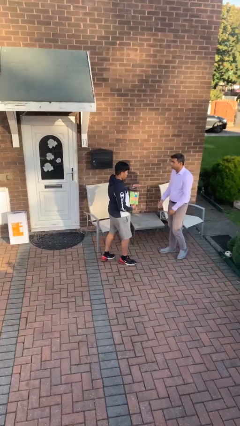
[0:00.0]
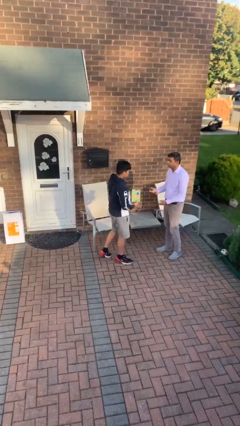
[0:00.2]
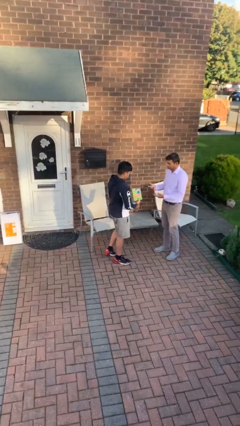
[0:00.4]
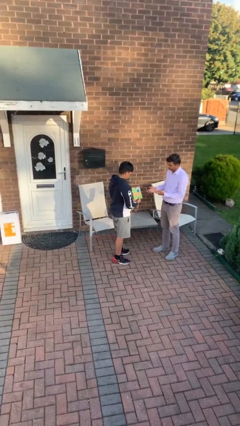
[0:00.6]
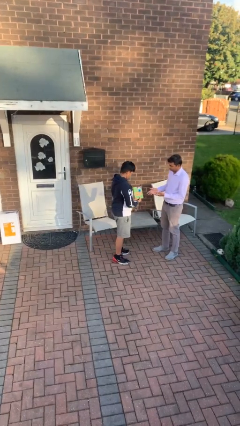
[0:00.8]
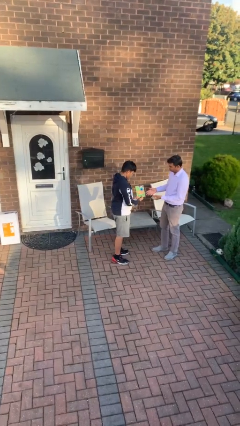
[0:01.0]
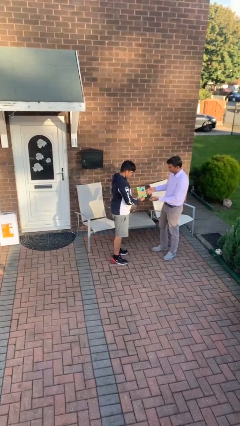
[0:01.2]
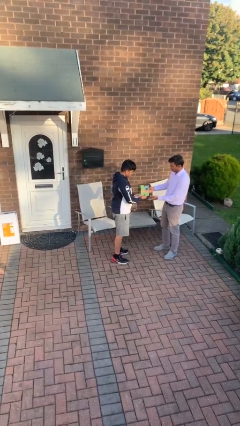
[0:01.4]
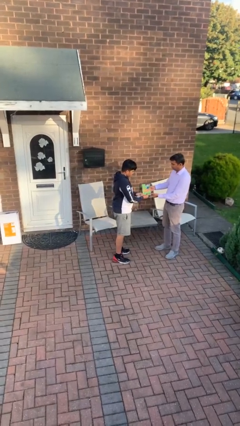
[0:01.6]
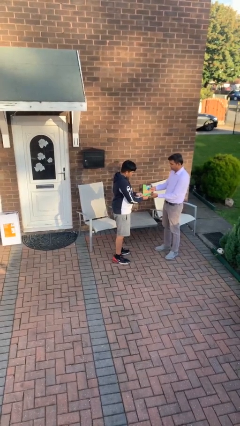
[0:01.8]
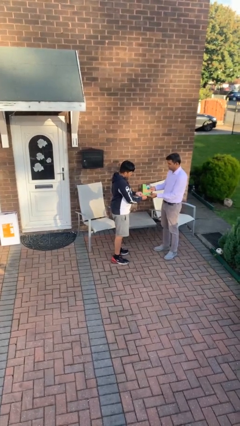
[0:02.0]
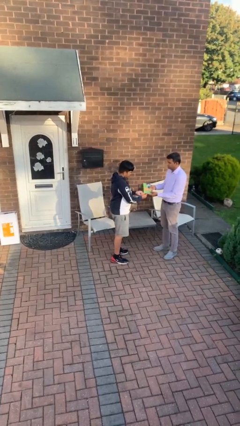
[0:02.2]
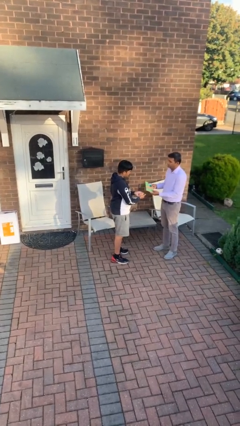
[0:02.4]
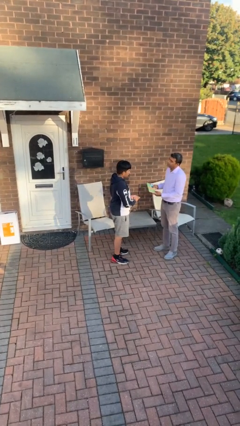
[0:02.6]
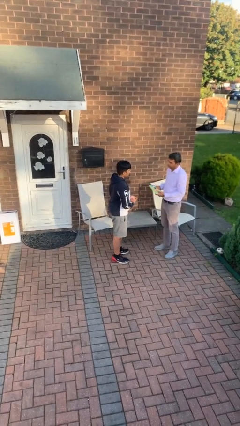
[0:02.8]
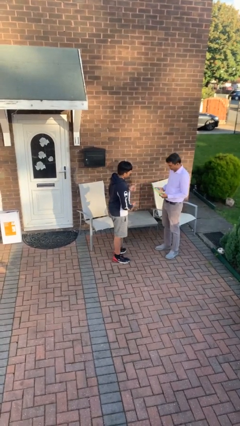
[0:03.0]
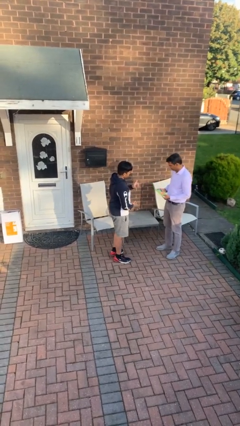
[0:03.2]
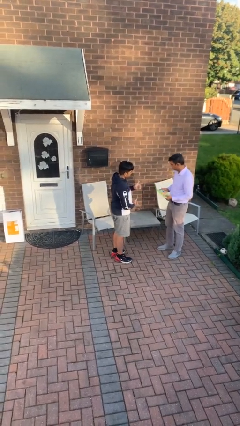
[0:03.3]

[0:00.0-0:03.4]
person transfers object to person

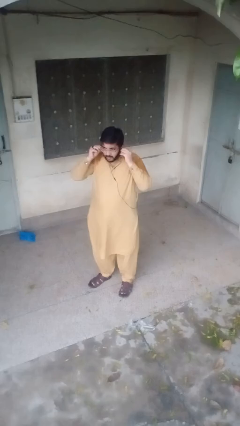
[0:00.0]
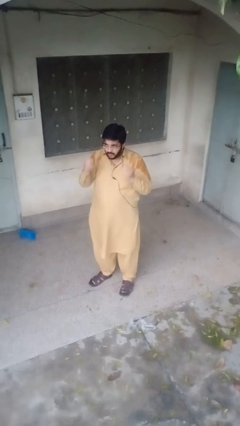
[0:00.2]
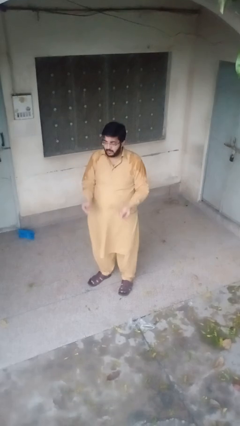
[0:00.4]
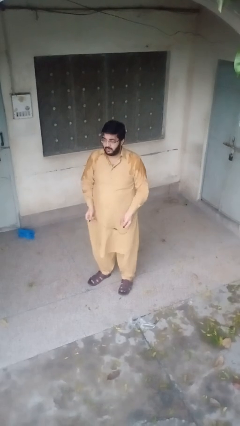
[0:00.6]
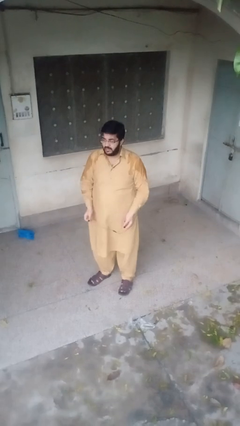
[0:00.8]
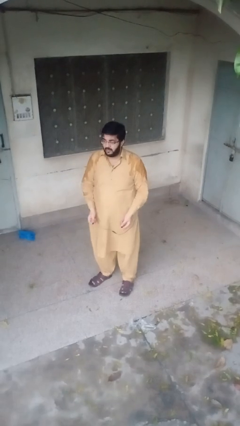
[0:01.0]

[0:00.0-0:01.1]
person takes off headphones

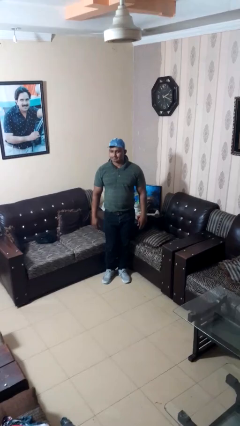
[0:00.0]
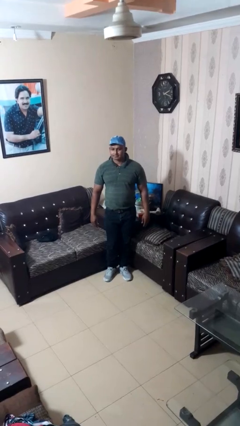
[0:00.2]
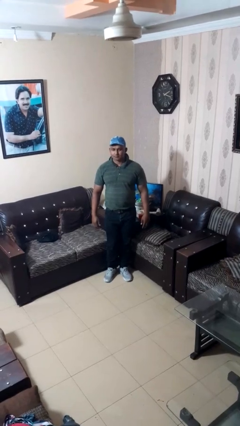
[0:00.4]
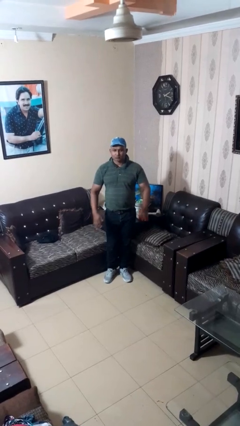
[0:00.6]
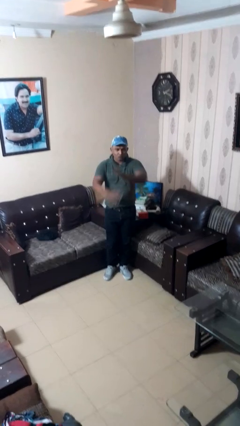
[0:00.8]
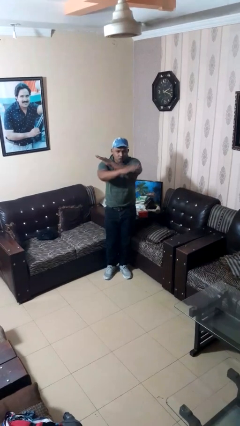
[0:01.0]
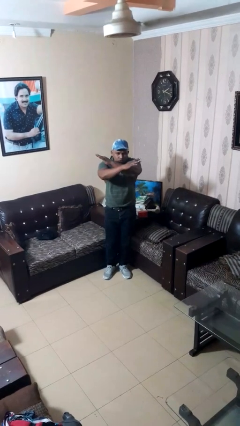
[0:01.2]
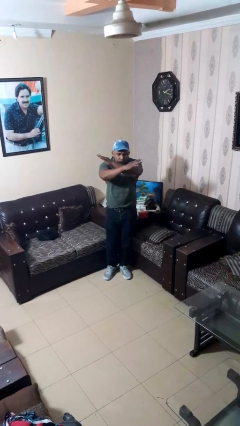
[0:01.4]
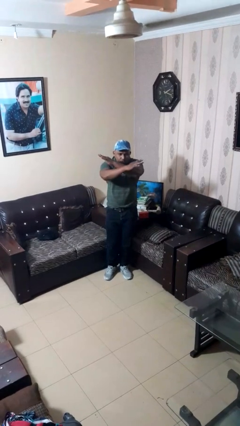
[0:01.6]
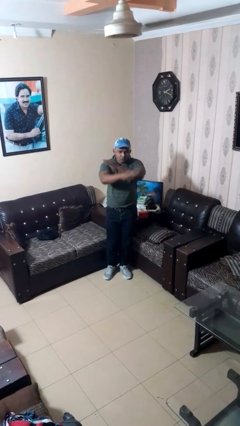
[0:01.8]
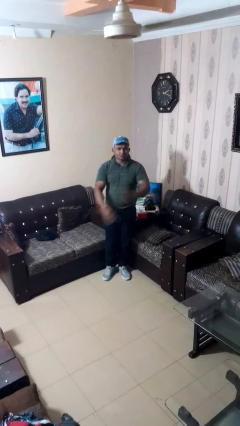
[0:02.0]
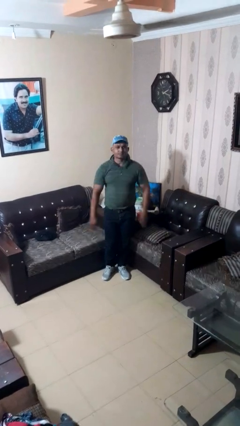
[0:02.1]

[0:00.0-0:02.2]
person gestures arms x

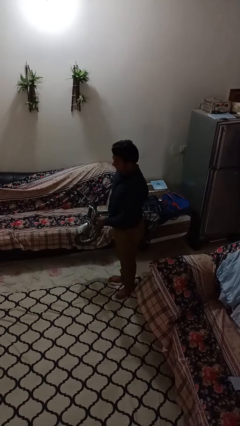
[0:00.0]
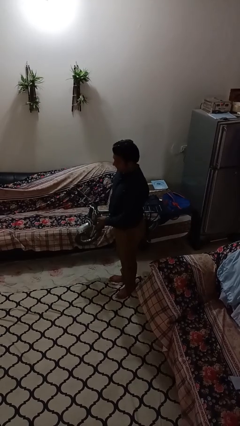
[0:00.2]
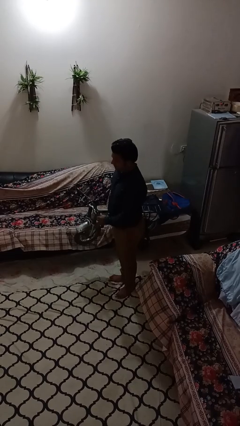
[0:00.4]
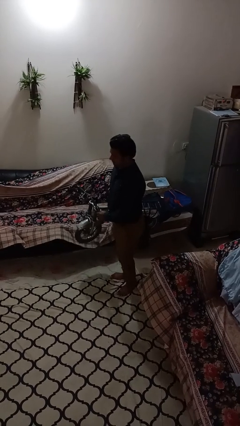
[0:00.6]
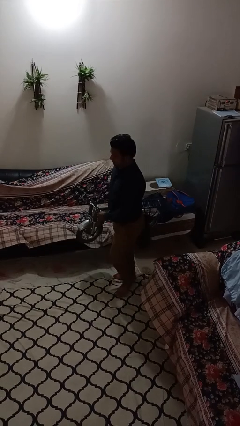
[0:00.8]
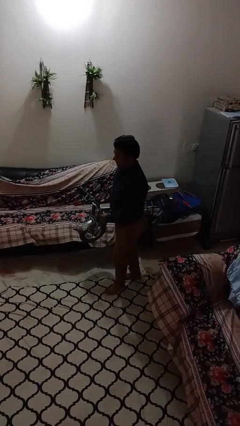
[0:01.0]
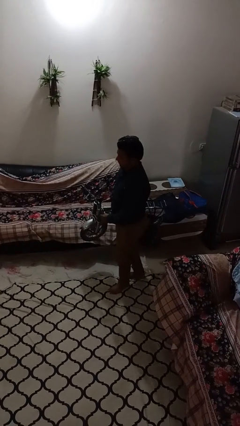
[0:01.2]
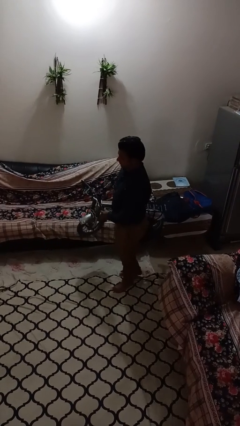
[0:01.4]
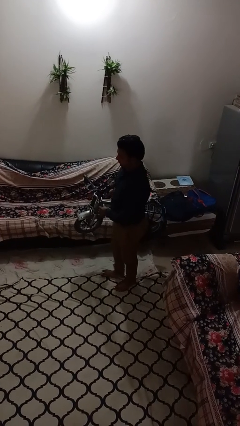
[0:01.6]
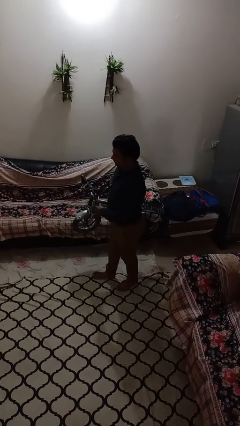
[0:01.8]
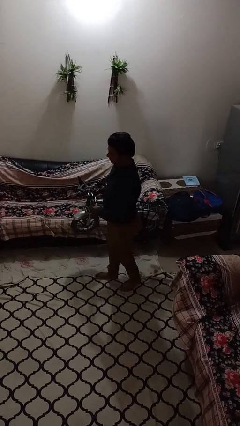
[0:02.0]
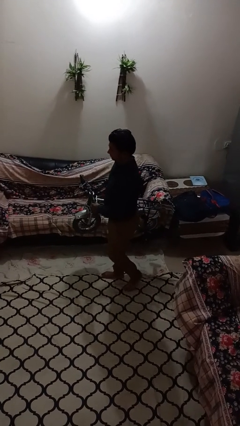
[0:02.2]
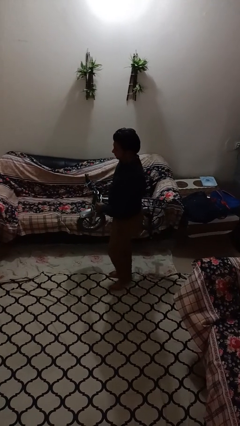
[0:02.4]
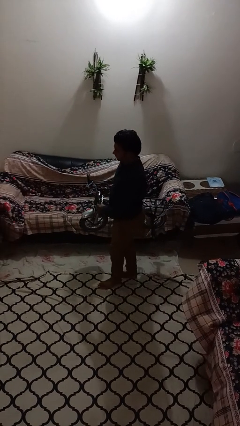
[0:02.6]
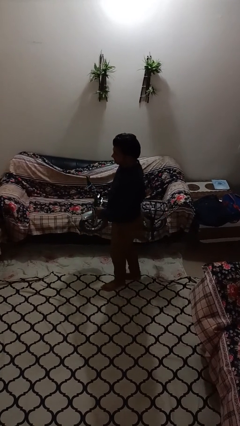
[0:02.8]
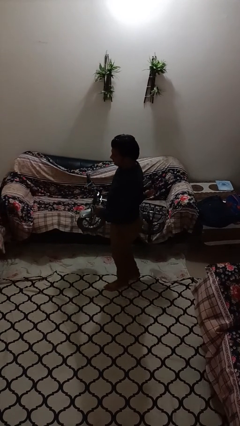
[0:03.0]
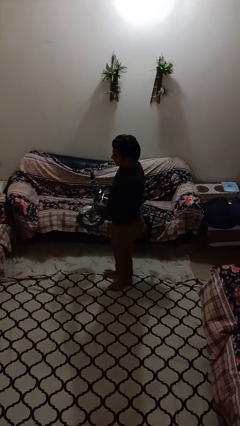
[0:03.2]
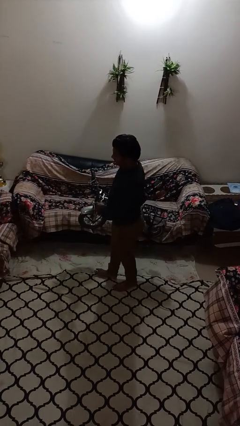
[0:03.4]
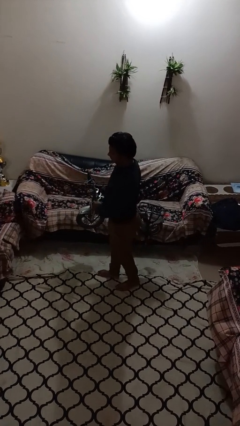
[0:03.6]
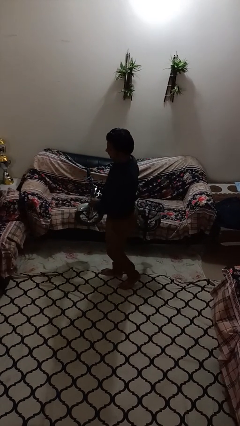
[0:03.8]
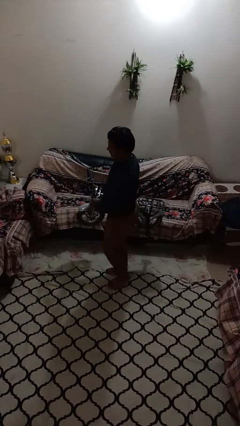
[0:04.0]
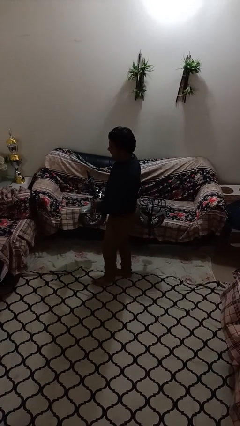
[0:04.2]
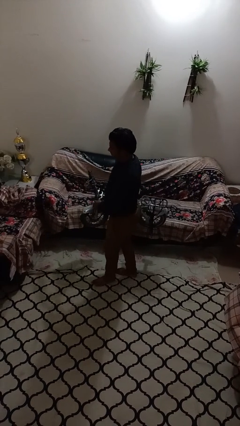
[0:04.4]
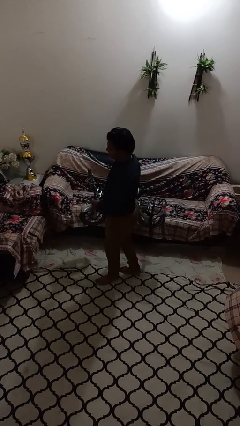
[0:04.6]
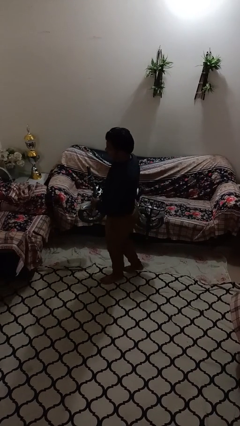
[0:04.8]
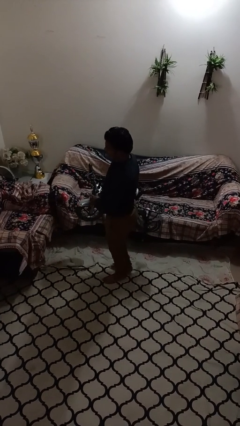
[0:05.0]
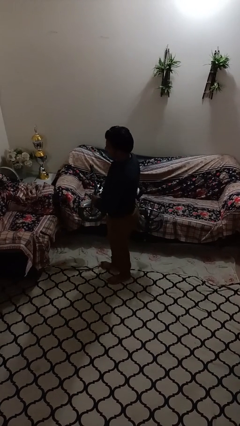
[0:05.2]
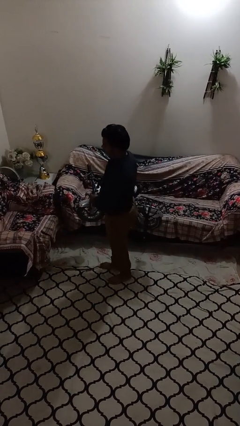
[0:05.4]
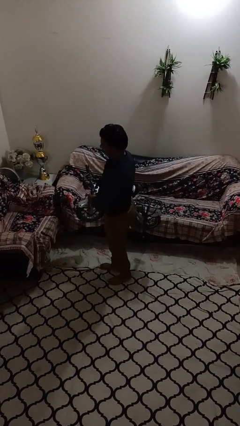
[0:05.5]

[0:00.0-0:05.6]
person carries bicycle

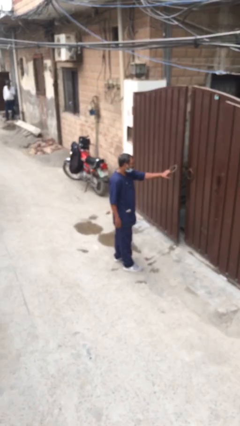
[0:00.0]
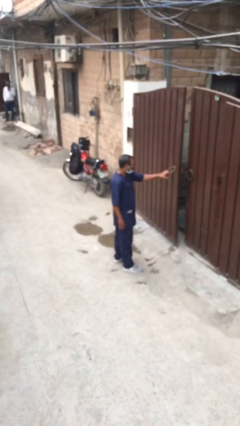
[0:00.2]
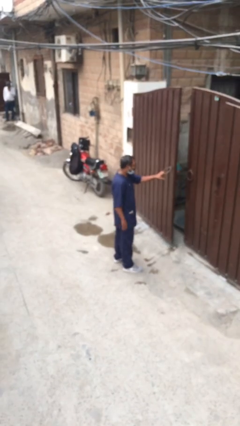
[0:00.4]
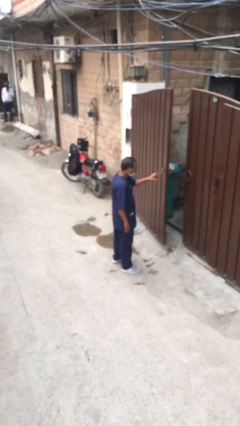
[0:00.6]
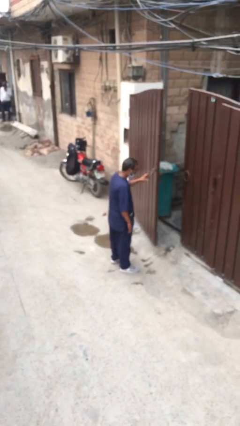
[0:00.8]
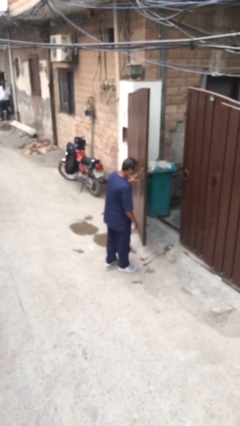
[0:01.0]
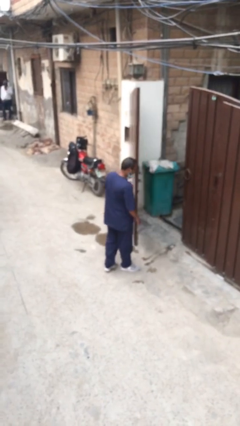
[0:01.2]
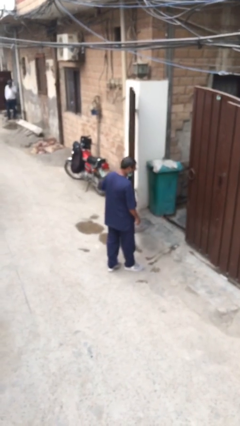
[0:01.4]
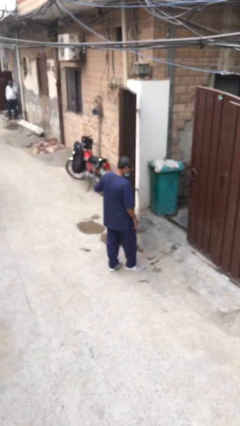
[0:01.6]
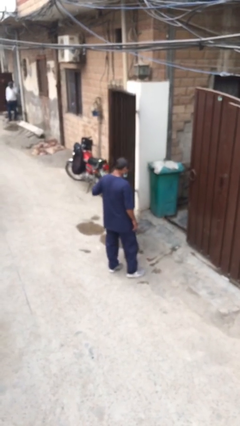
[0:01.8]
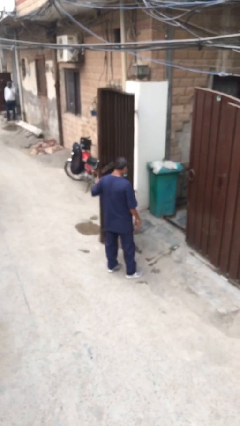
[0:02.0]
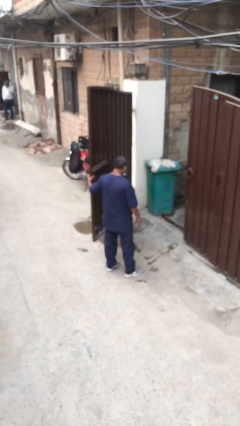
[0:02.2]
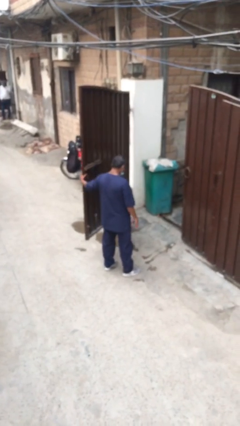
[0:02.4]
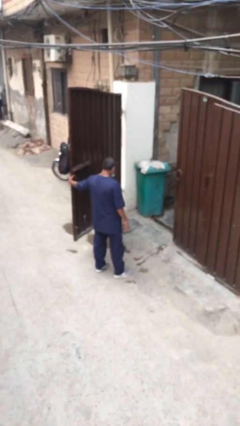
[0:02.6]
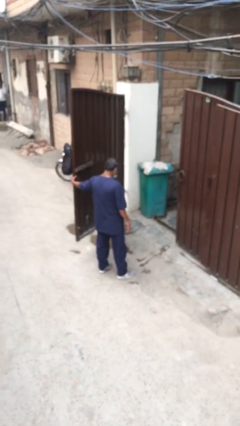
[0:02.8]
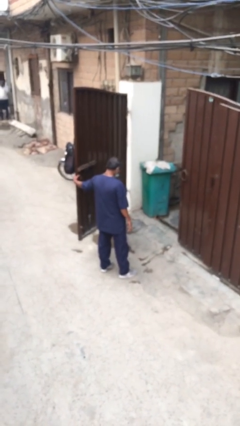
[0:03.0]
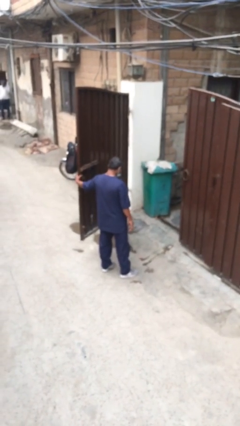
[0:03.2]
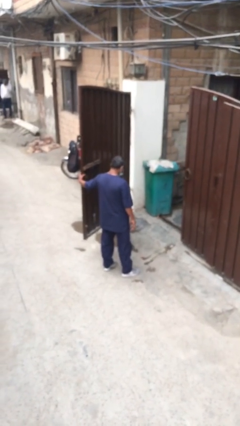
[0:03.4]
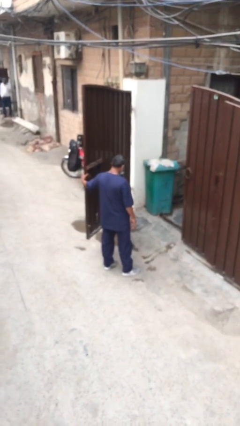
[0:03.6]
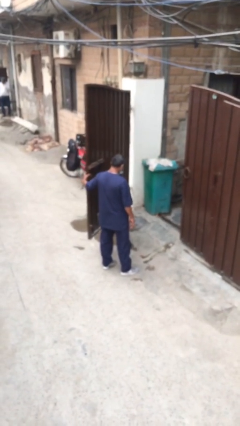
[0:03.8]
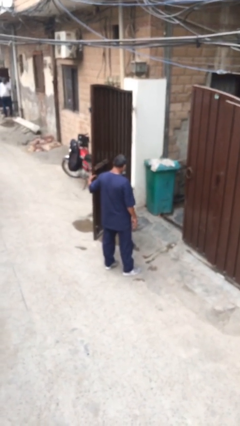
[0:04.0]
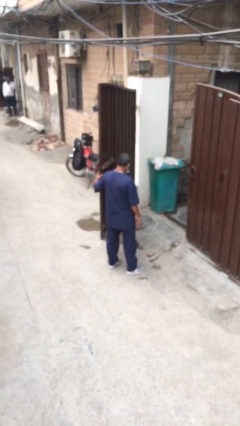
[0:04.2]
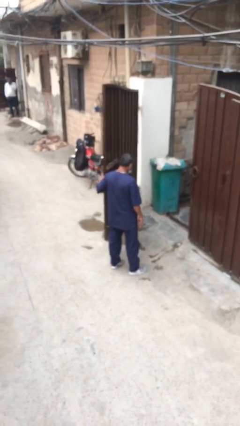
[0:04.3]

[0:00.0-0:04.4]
person opens facility door

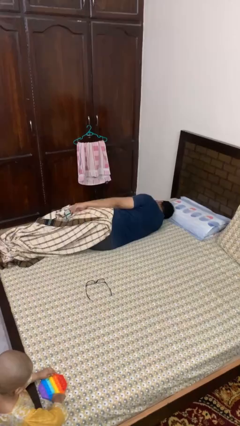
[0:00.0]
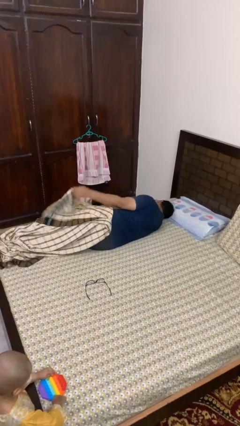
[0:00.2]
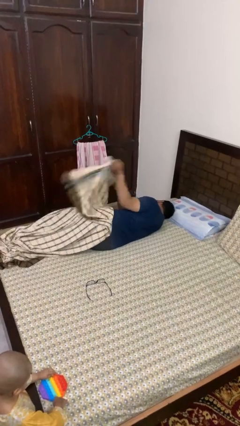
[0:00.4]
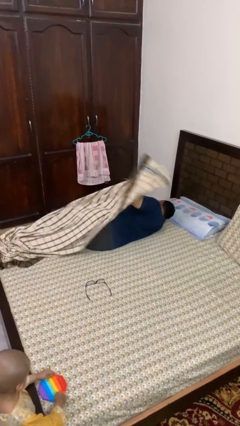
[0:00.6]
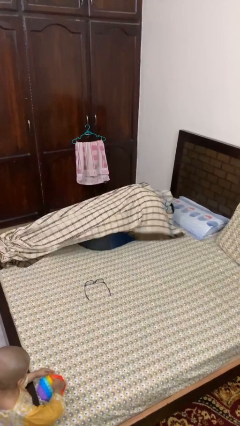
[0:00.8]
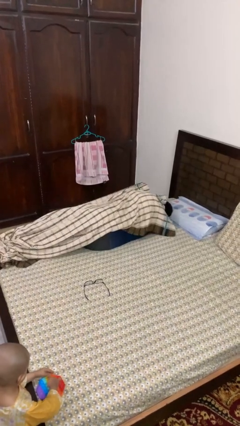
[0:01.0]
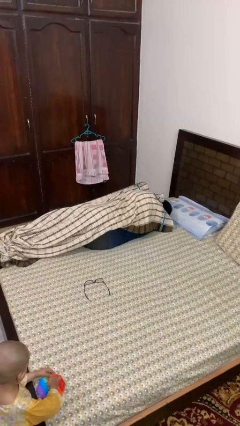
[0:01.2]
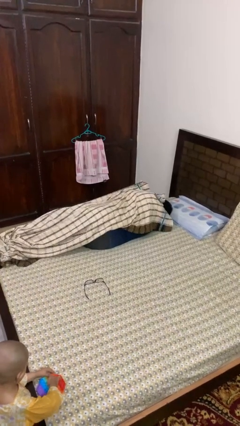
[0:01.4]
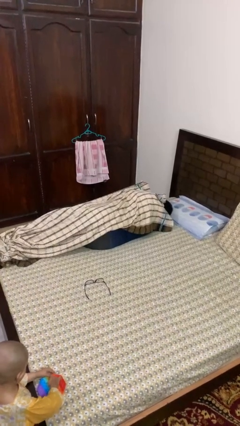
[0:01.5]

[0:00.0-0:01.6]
person covers with blanket
